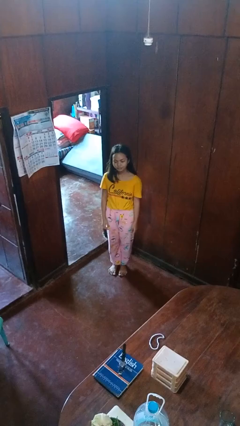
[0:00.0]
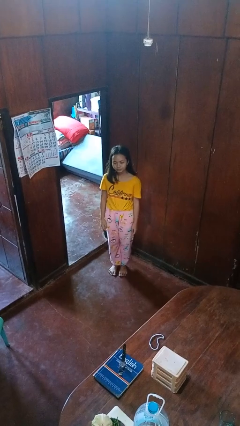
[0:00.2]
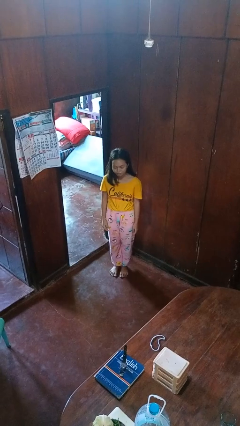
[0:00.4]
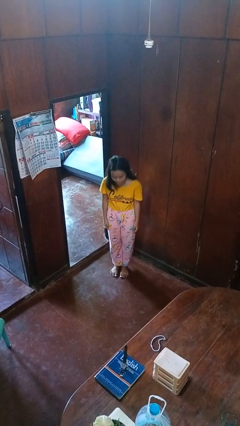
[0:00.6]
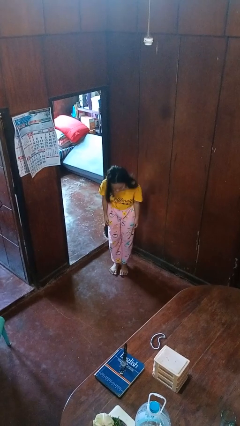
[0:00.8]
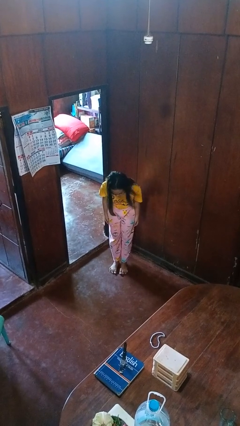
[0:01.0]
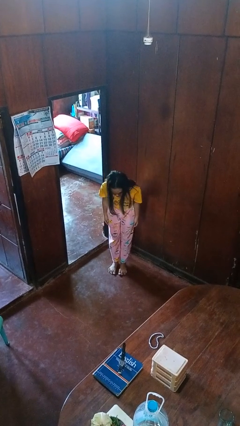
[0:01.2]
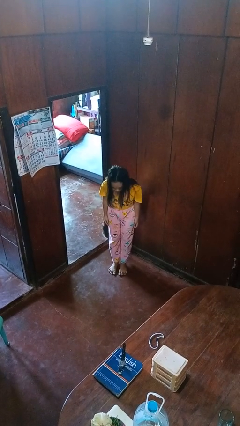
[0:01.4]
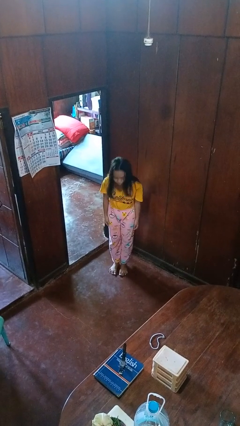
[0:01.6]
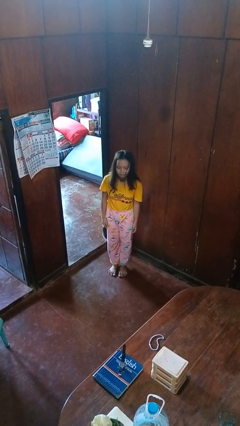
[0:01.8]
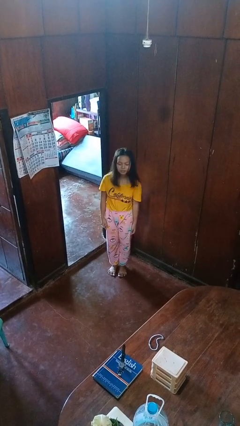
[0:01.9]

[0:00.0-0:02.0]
person bows

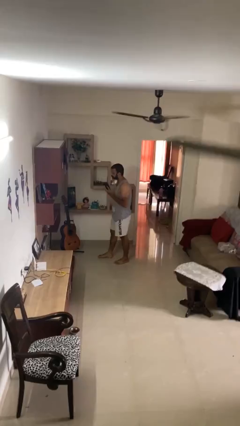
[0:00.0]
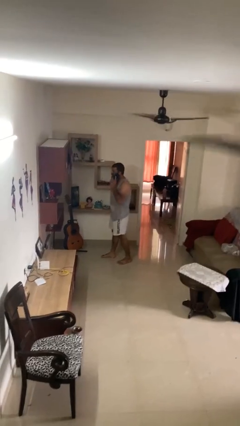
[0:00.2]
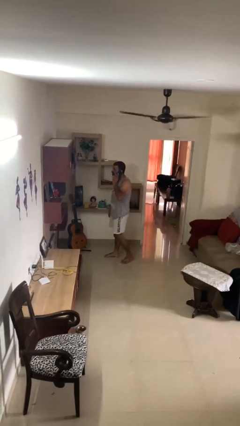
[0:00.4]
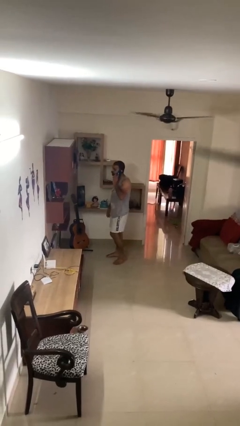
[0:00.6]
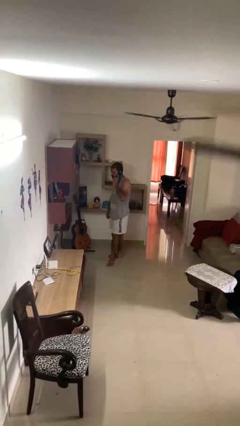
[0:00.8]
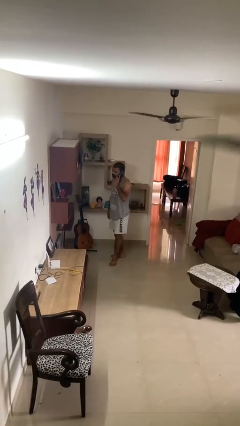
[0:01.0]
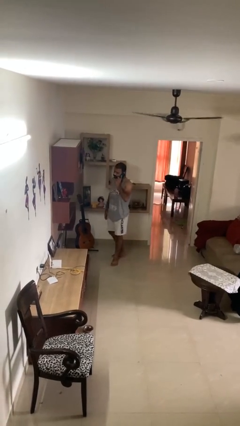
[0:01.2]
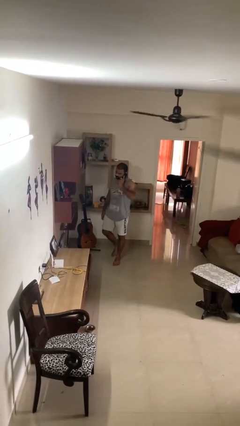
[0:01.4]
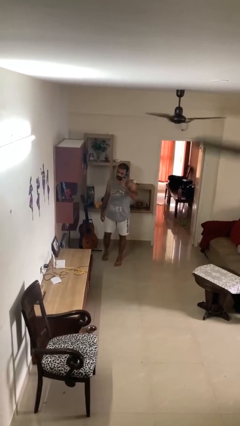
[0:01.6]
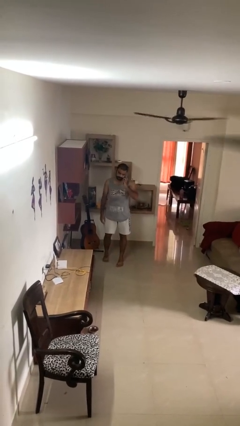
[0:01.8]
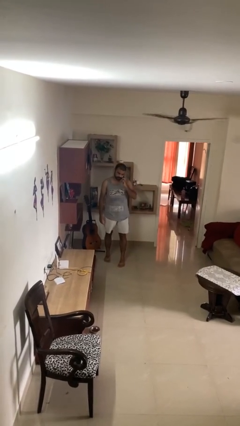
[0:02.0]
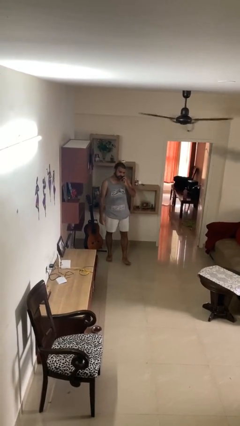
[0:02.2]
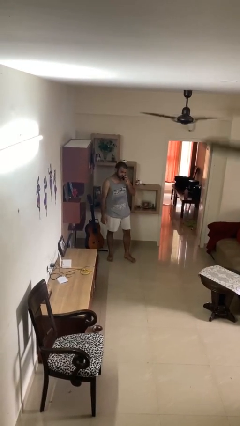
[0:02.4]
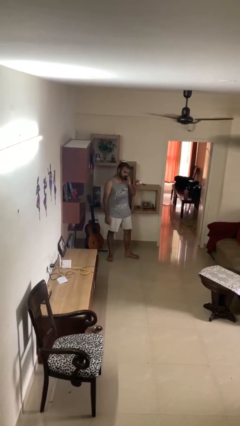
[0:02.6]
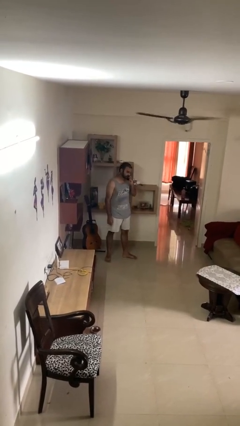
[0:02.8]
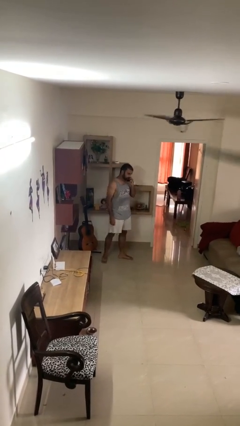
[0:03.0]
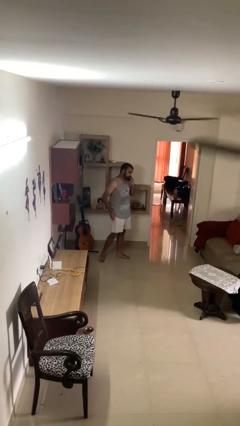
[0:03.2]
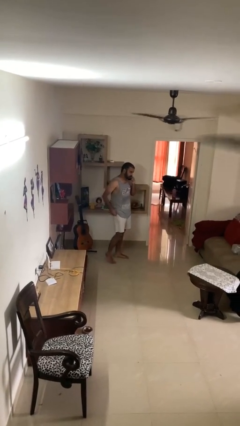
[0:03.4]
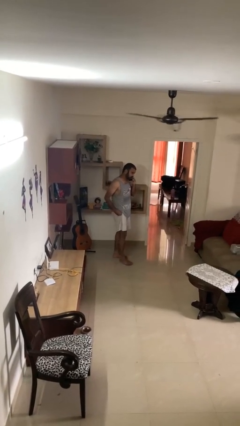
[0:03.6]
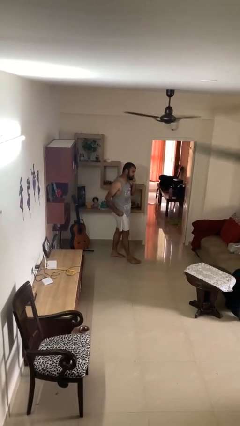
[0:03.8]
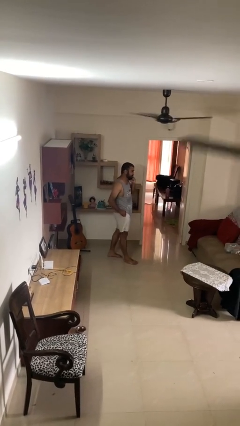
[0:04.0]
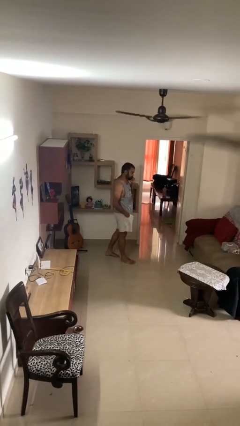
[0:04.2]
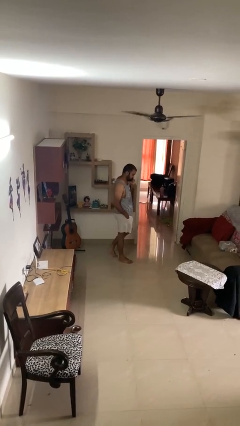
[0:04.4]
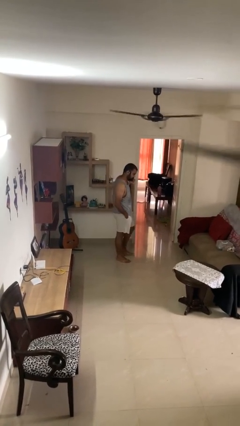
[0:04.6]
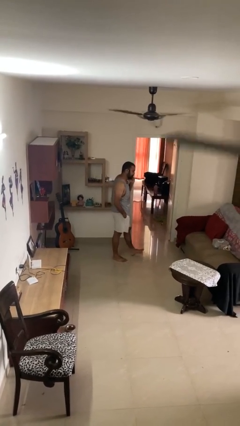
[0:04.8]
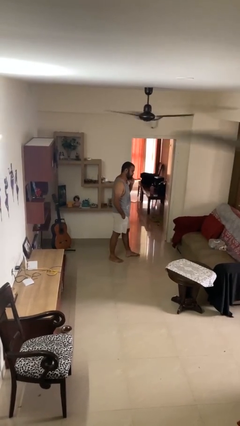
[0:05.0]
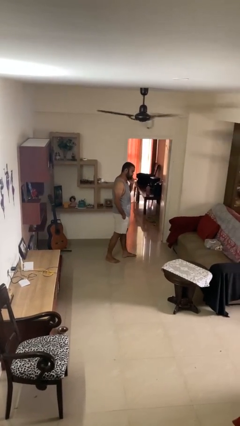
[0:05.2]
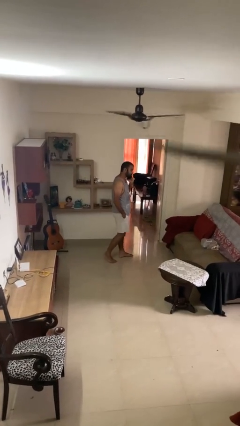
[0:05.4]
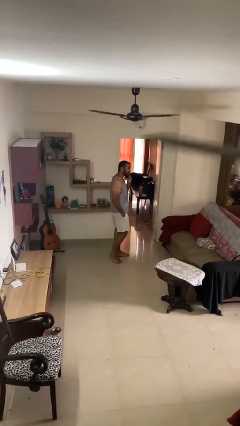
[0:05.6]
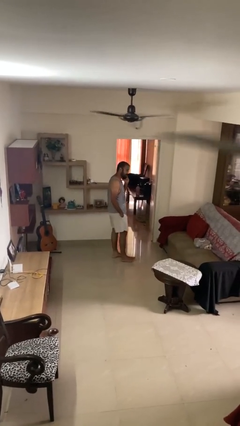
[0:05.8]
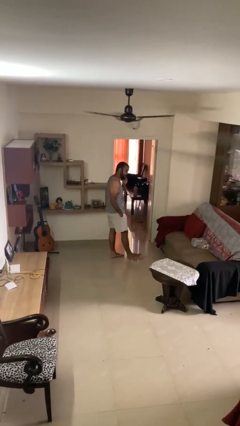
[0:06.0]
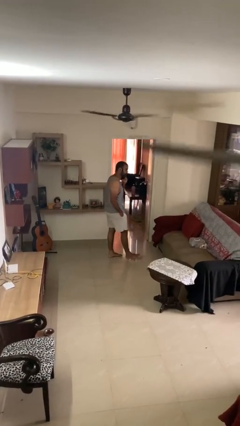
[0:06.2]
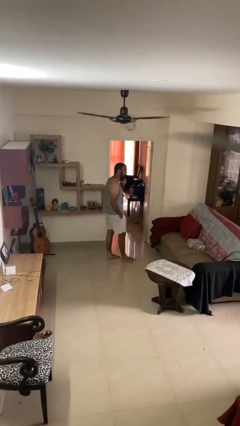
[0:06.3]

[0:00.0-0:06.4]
person talks on phone

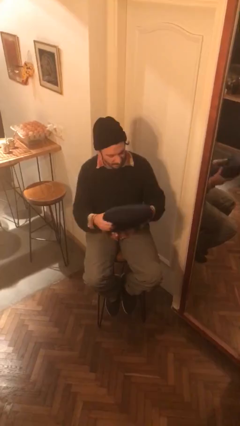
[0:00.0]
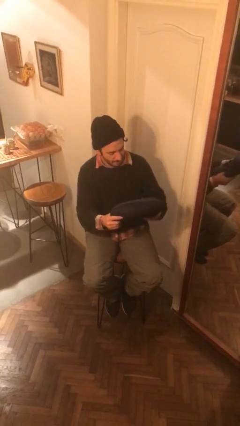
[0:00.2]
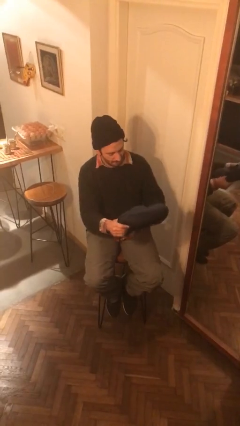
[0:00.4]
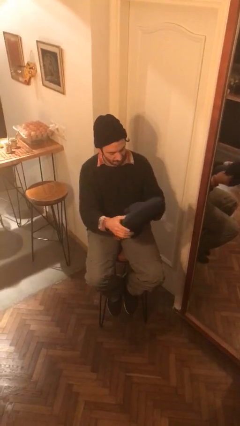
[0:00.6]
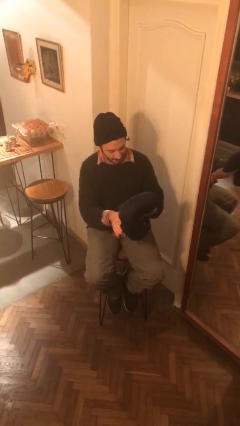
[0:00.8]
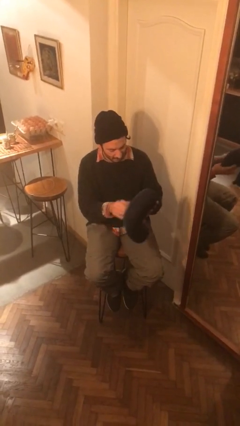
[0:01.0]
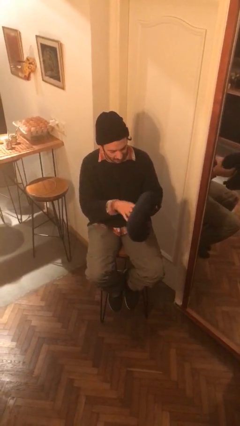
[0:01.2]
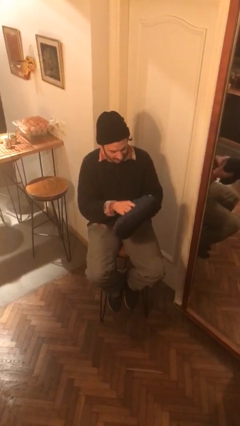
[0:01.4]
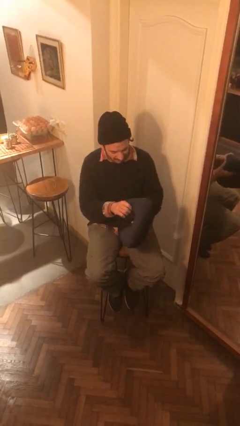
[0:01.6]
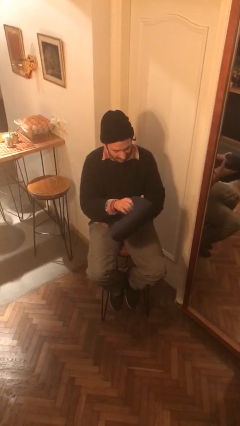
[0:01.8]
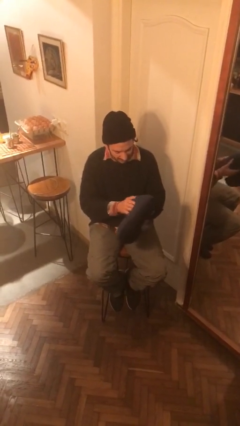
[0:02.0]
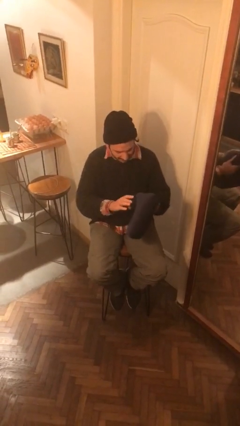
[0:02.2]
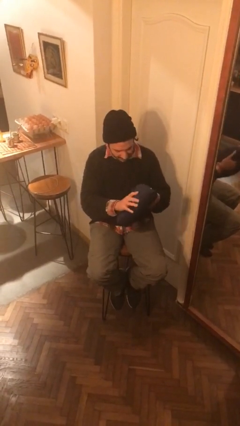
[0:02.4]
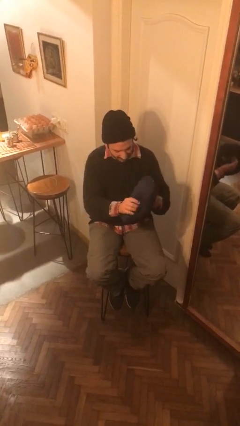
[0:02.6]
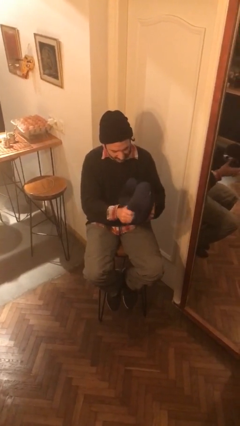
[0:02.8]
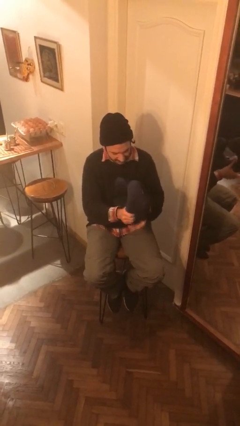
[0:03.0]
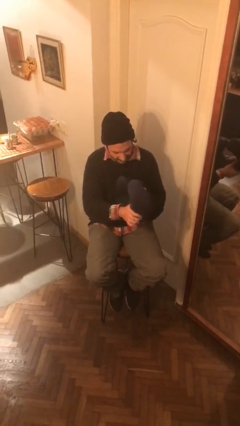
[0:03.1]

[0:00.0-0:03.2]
person squeezes object

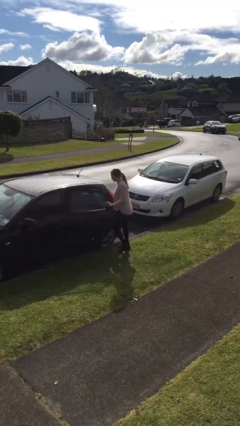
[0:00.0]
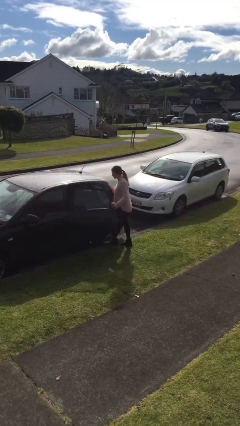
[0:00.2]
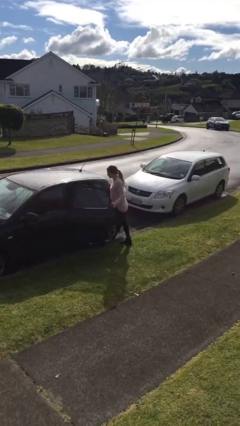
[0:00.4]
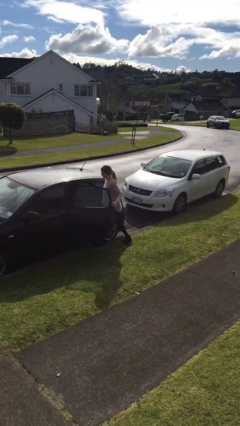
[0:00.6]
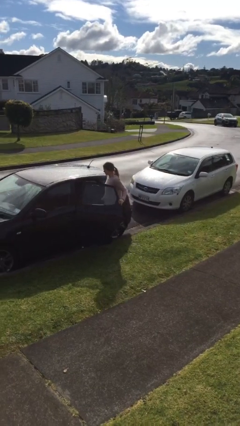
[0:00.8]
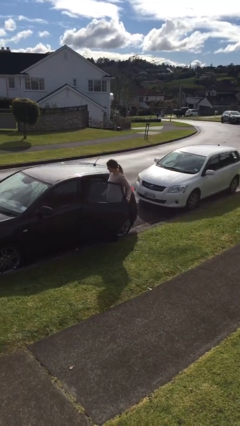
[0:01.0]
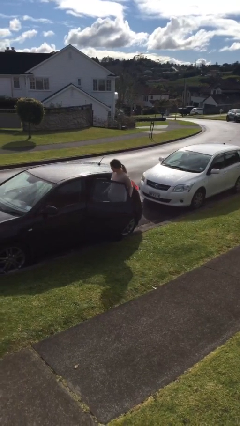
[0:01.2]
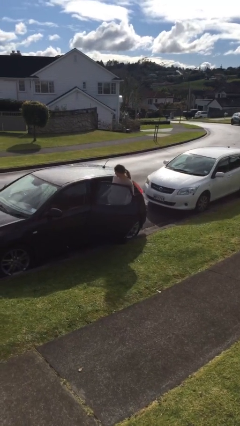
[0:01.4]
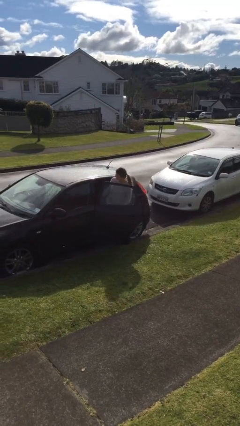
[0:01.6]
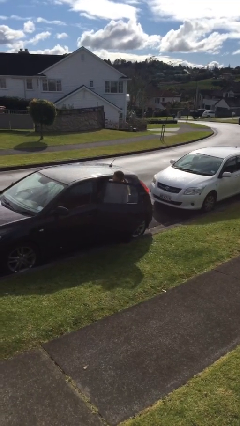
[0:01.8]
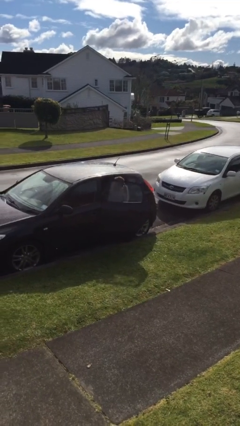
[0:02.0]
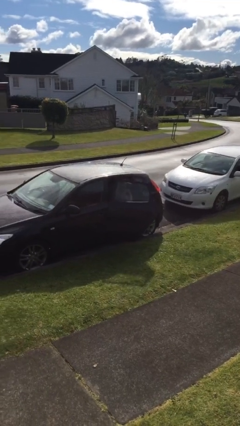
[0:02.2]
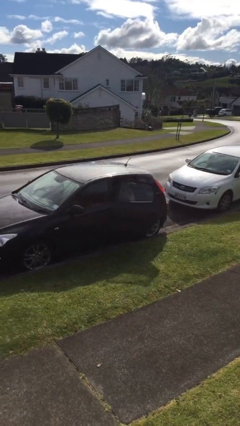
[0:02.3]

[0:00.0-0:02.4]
person enters car

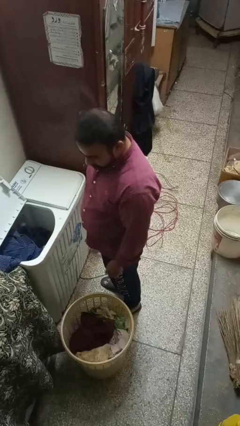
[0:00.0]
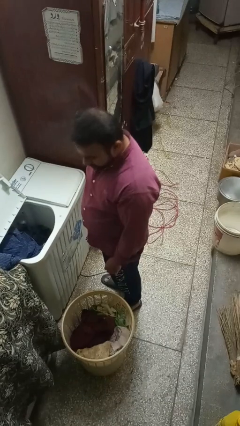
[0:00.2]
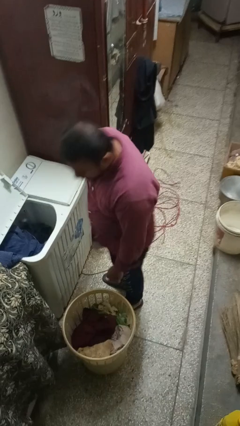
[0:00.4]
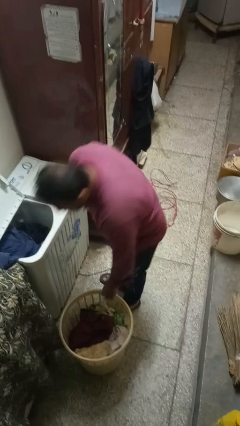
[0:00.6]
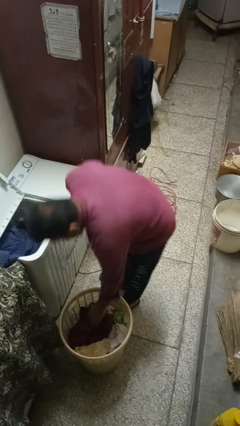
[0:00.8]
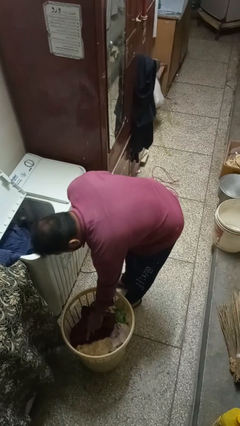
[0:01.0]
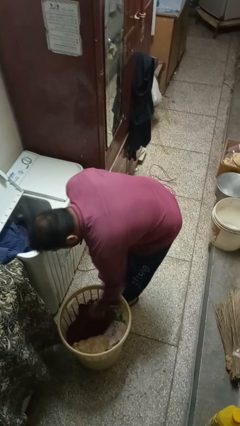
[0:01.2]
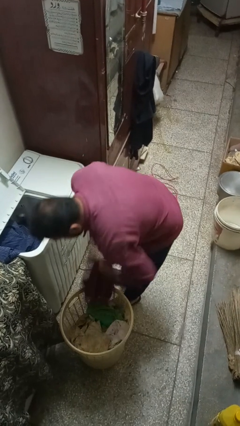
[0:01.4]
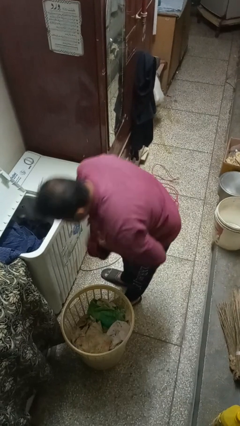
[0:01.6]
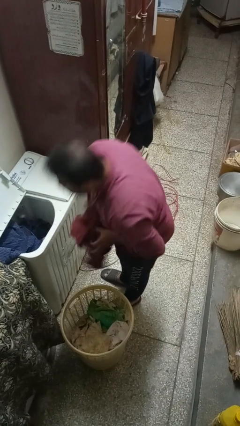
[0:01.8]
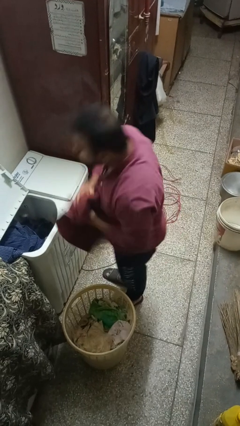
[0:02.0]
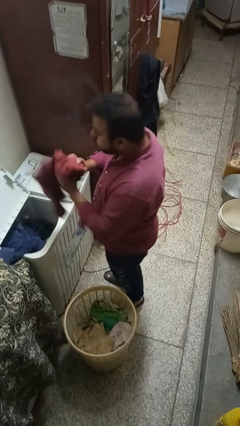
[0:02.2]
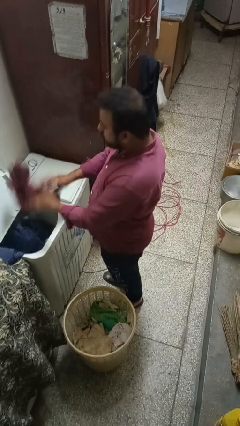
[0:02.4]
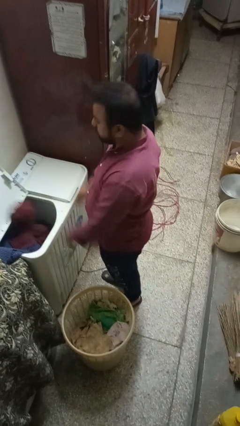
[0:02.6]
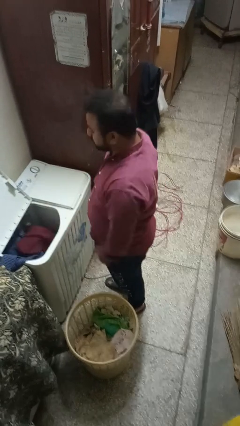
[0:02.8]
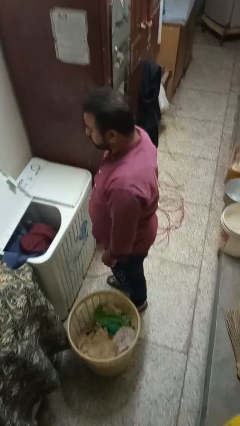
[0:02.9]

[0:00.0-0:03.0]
person loads clotheswasher

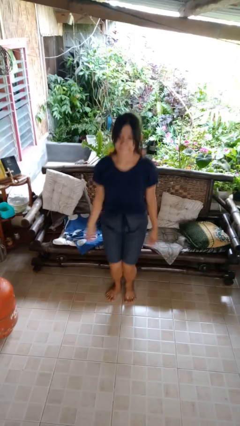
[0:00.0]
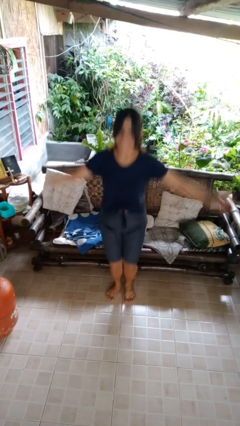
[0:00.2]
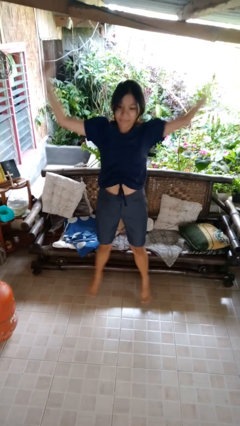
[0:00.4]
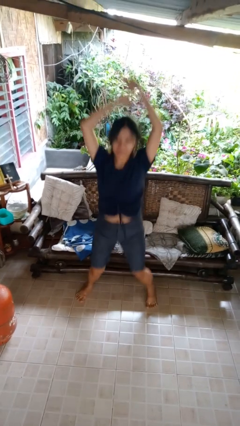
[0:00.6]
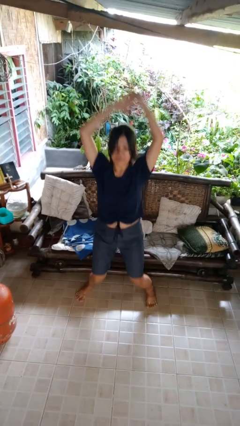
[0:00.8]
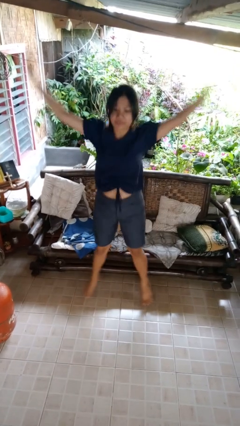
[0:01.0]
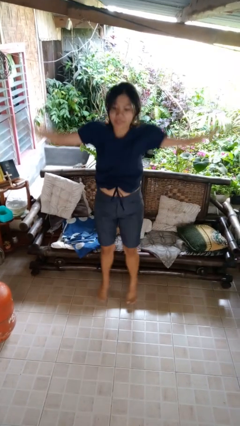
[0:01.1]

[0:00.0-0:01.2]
person exercises with jumping jacks
